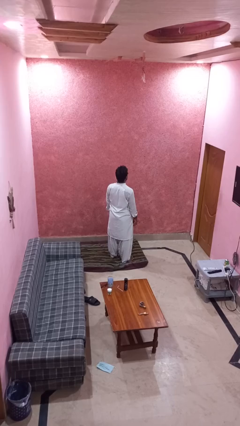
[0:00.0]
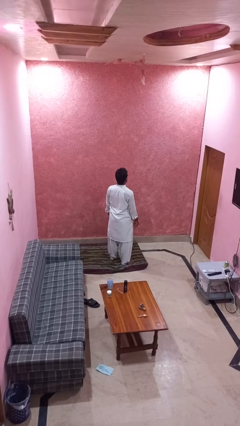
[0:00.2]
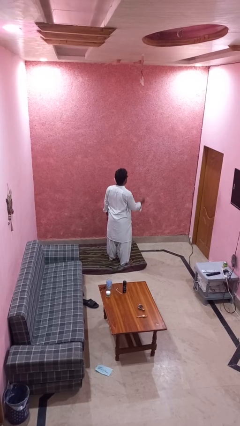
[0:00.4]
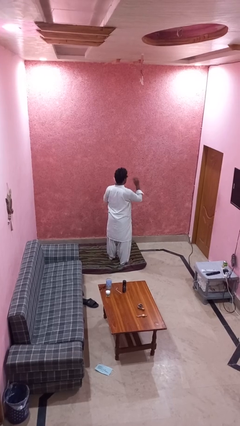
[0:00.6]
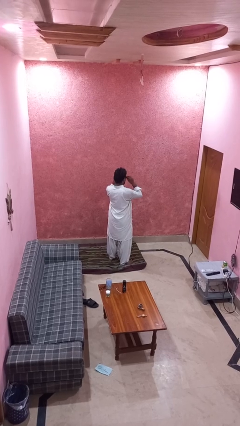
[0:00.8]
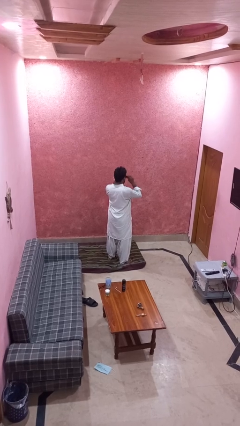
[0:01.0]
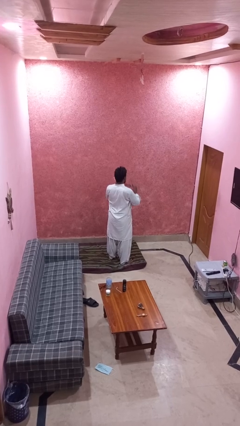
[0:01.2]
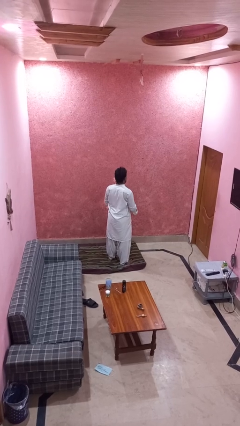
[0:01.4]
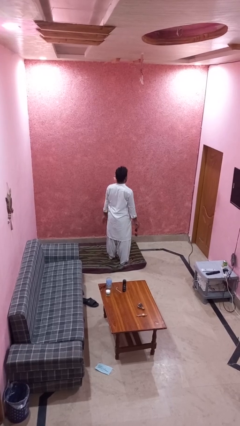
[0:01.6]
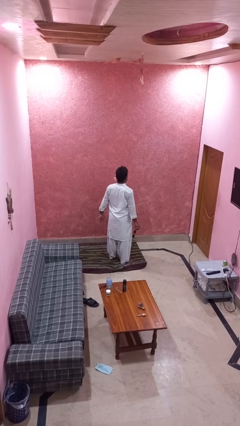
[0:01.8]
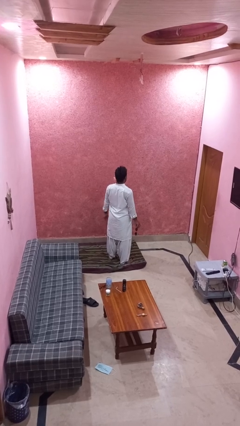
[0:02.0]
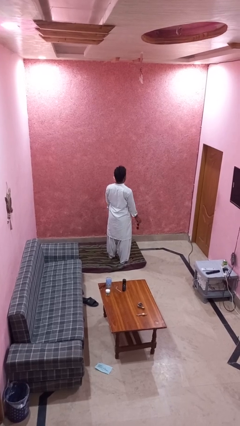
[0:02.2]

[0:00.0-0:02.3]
person takes off sunglasses

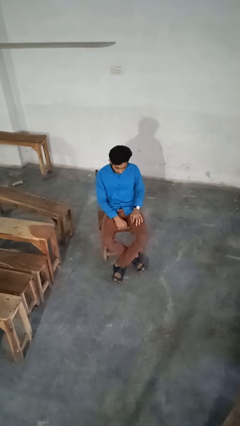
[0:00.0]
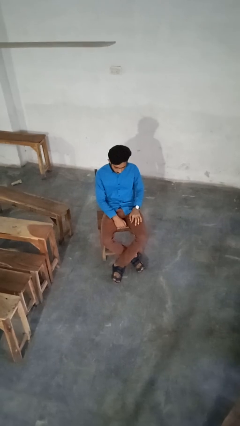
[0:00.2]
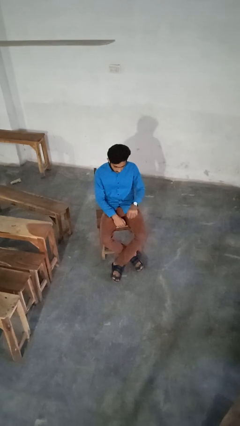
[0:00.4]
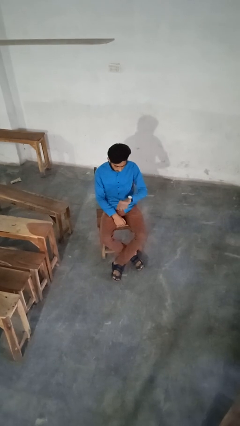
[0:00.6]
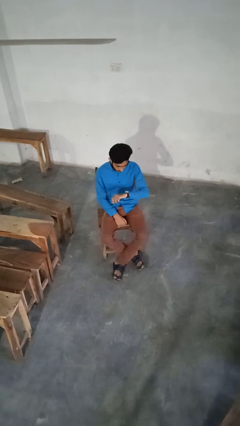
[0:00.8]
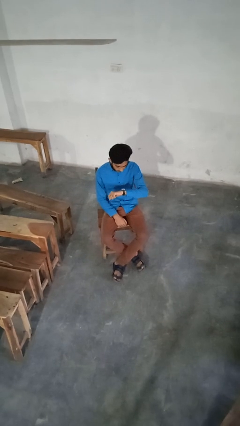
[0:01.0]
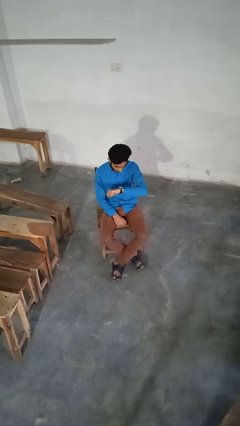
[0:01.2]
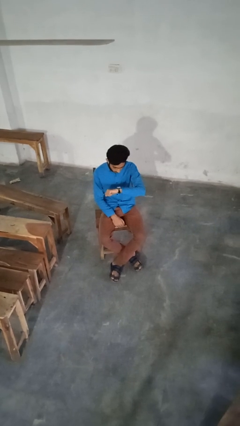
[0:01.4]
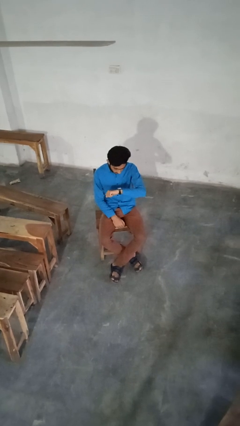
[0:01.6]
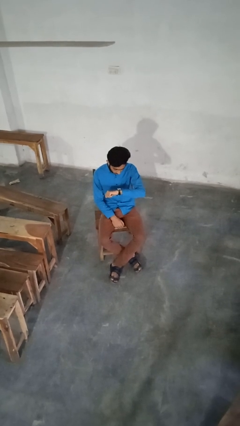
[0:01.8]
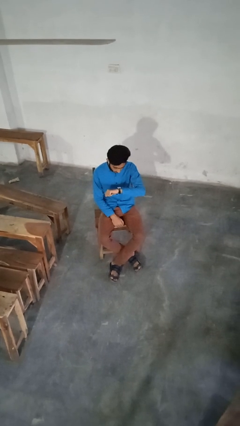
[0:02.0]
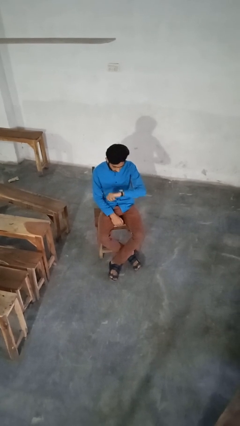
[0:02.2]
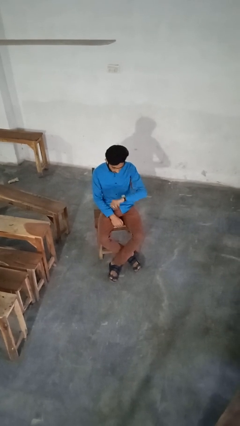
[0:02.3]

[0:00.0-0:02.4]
person looks at wristwatch

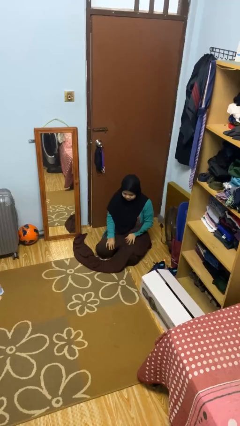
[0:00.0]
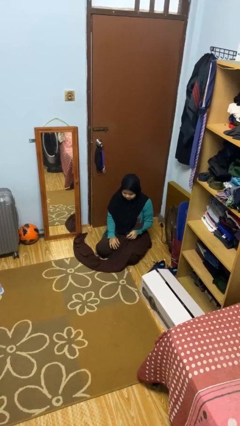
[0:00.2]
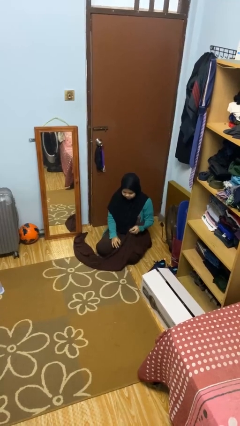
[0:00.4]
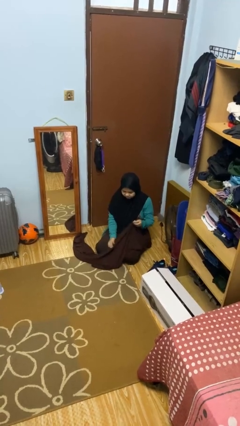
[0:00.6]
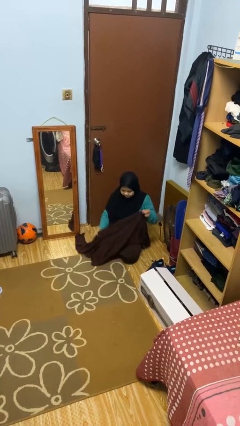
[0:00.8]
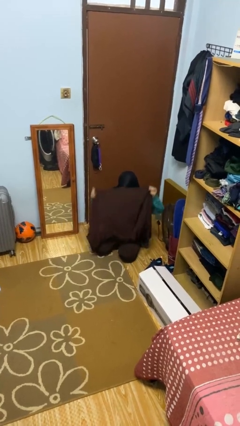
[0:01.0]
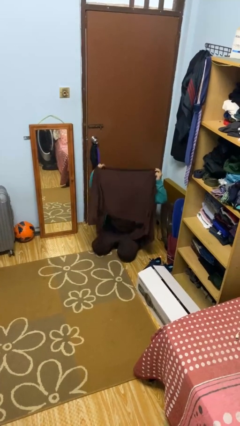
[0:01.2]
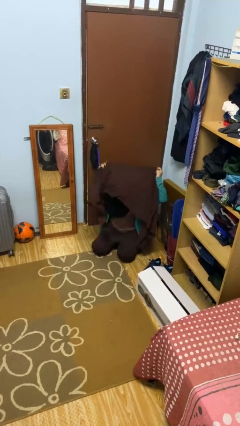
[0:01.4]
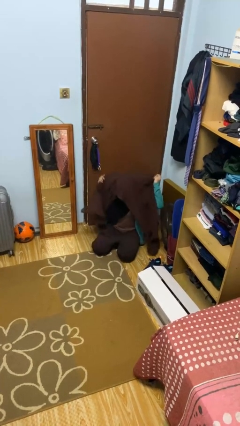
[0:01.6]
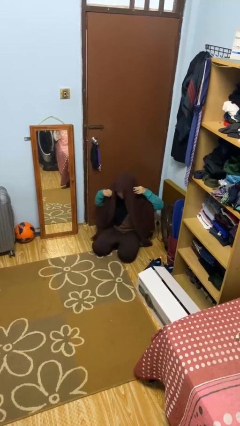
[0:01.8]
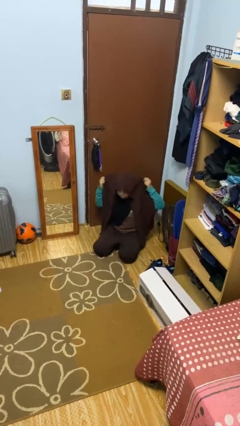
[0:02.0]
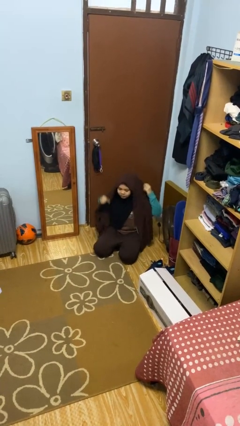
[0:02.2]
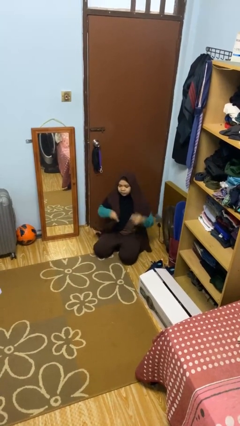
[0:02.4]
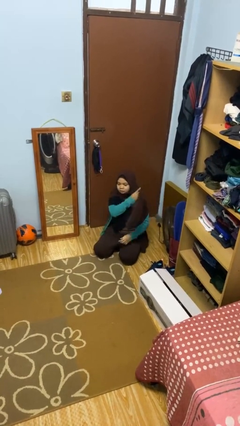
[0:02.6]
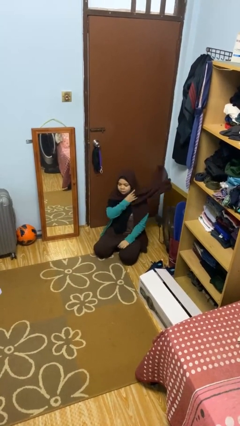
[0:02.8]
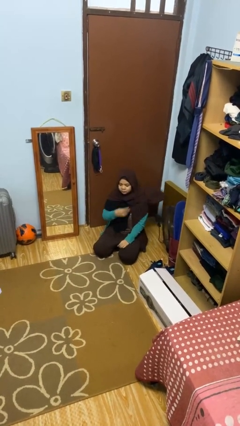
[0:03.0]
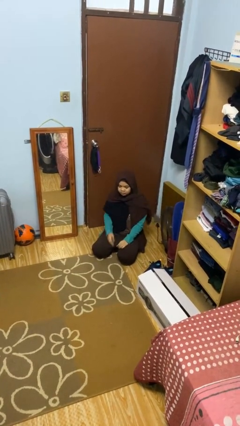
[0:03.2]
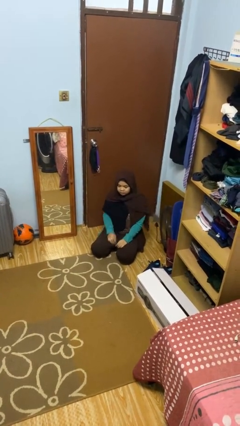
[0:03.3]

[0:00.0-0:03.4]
person puts on scarf

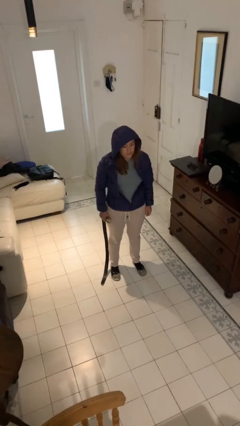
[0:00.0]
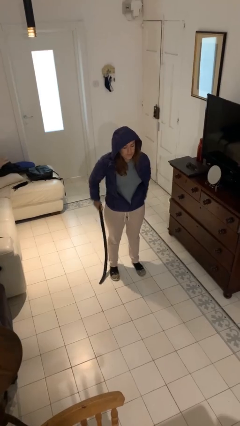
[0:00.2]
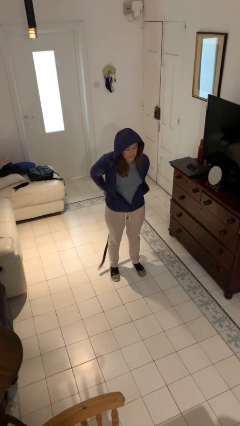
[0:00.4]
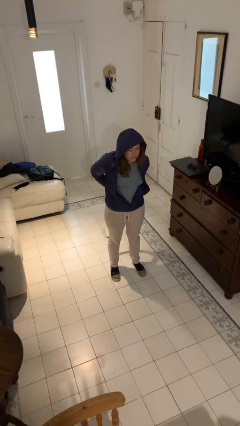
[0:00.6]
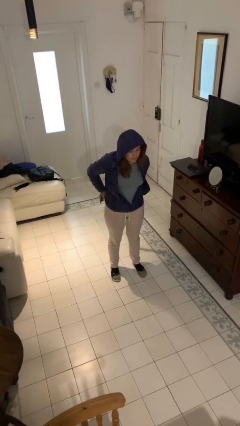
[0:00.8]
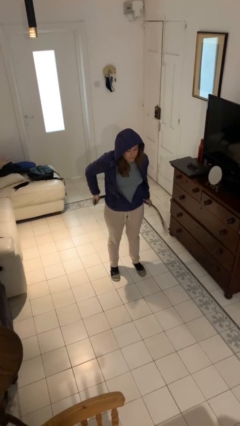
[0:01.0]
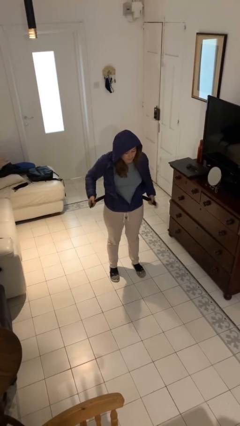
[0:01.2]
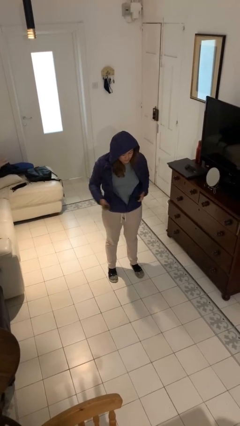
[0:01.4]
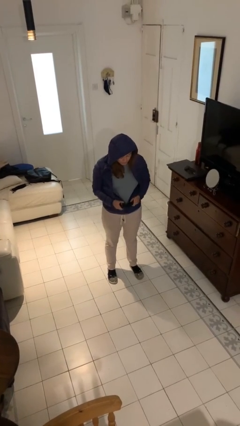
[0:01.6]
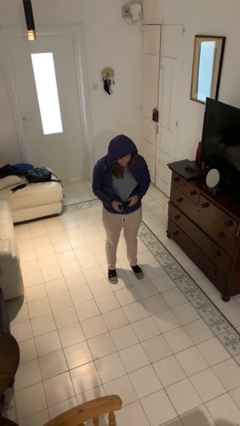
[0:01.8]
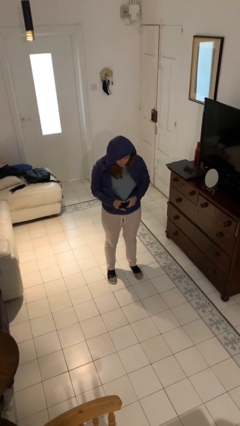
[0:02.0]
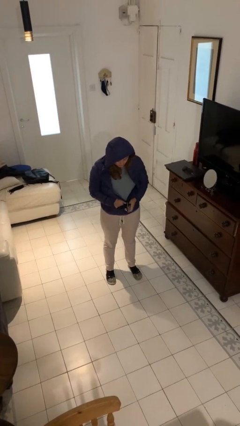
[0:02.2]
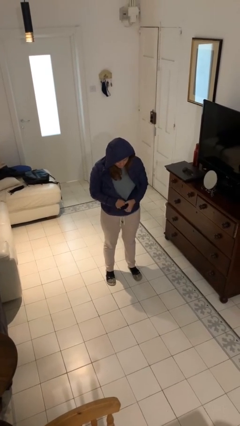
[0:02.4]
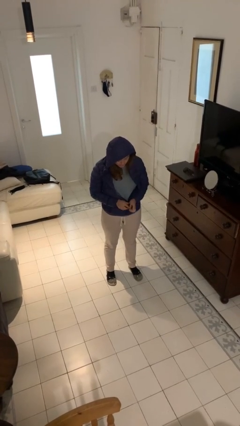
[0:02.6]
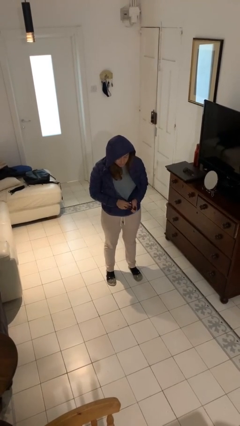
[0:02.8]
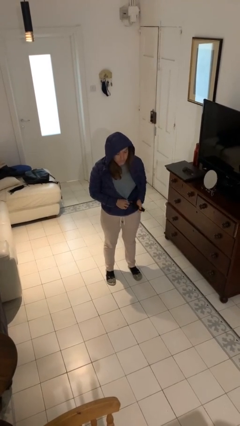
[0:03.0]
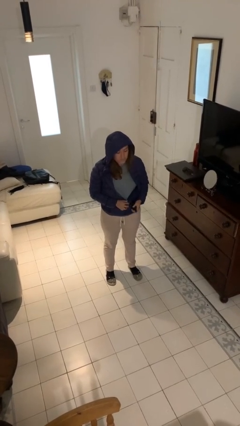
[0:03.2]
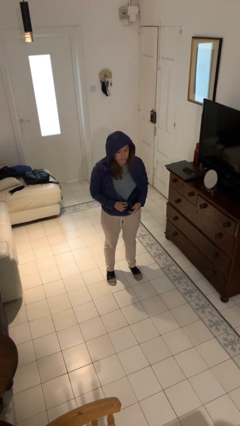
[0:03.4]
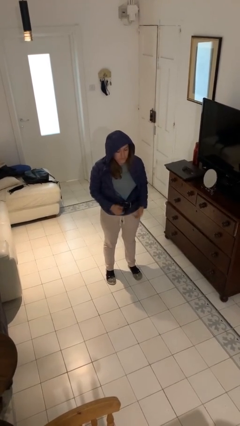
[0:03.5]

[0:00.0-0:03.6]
person puts on belt

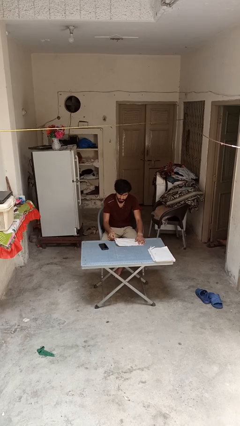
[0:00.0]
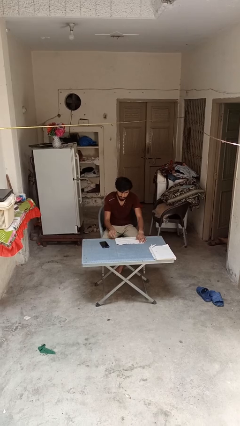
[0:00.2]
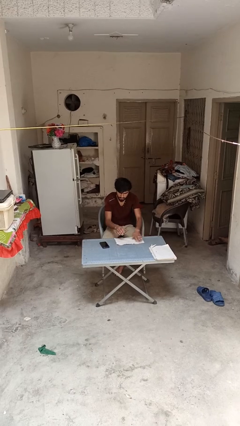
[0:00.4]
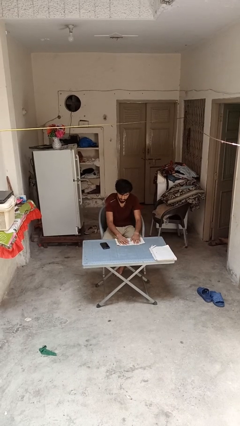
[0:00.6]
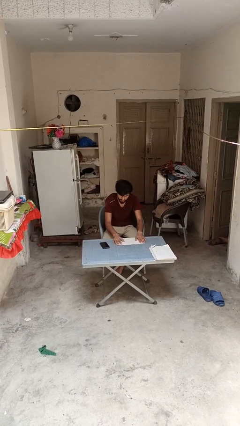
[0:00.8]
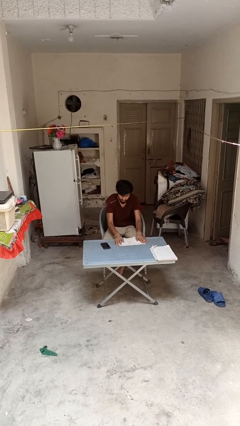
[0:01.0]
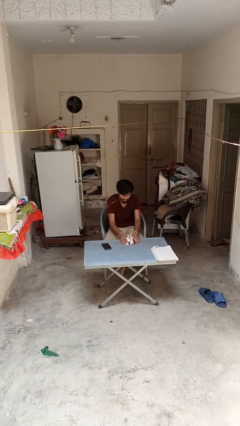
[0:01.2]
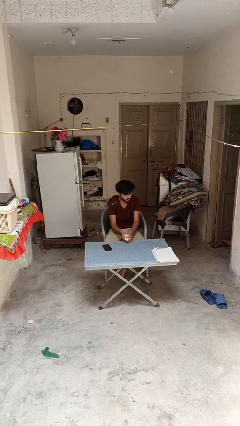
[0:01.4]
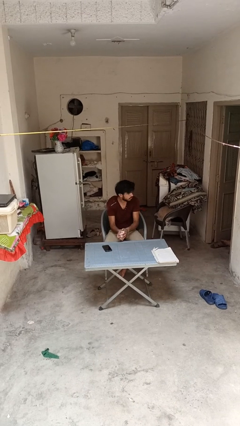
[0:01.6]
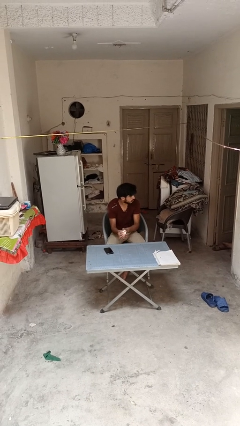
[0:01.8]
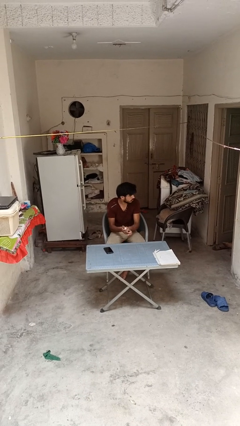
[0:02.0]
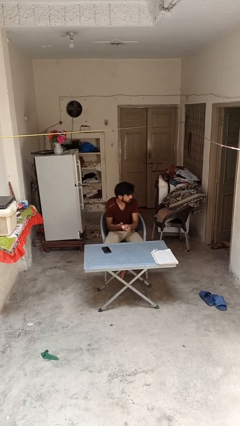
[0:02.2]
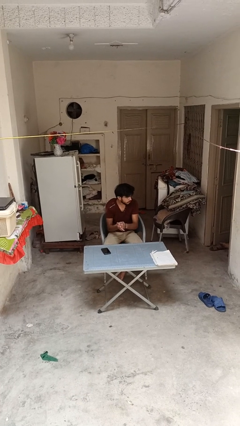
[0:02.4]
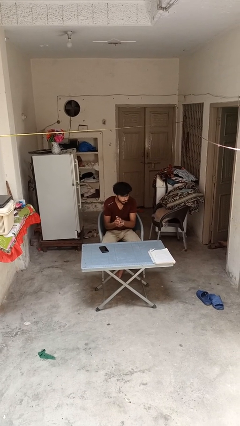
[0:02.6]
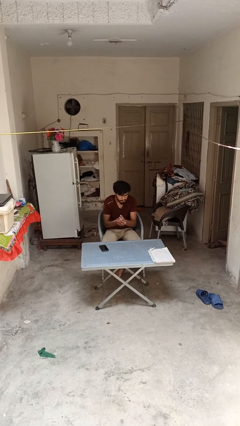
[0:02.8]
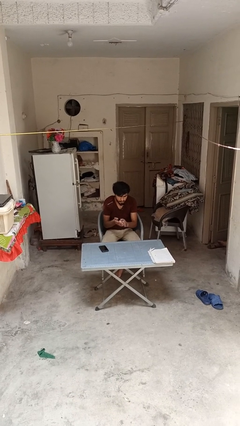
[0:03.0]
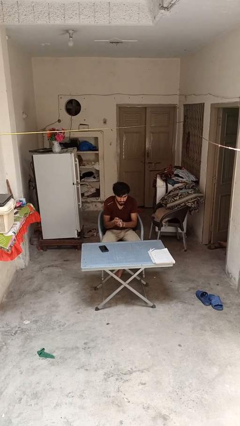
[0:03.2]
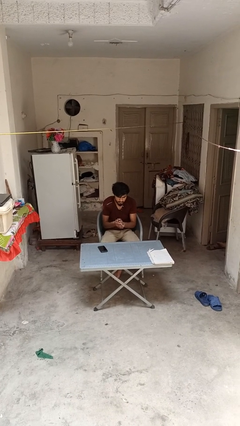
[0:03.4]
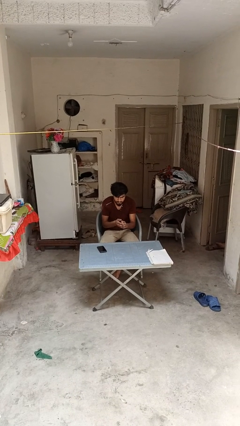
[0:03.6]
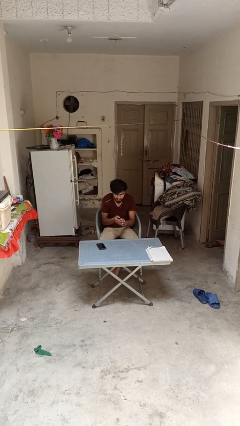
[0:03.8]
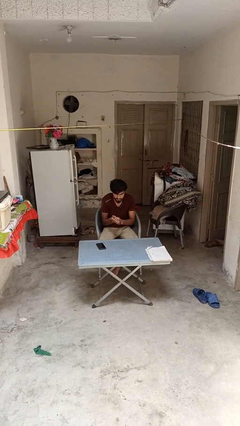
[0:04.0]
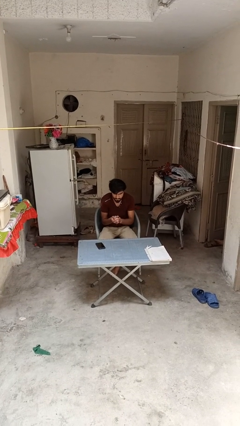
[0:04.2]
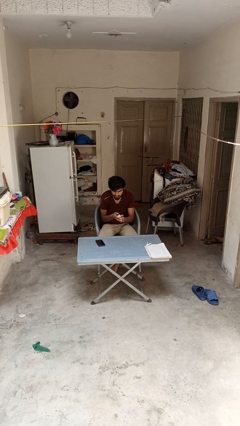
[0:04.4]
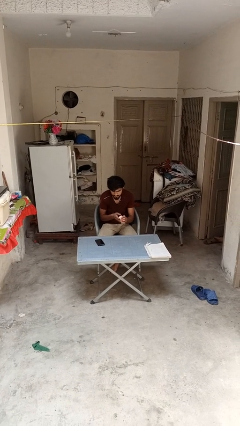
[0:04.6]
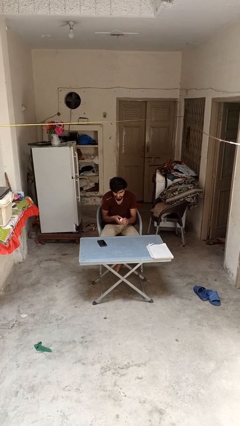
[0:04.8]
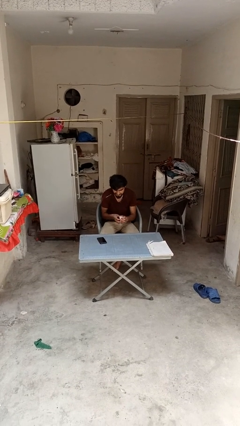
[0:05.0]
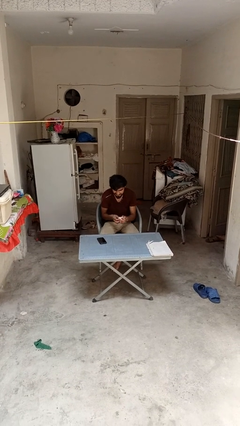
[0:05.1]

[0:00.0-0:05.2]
person crumples paper

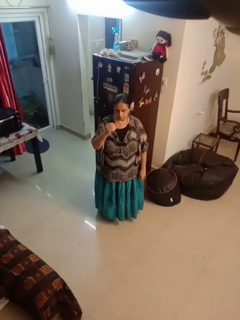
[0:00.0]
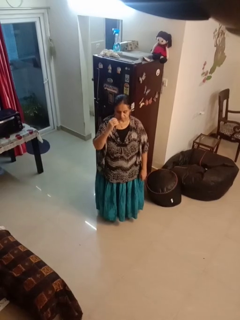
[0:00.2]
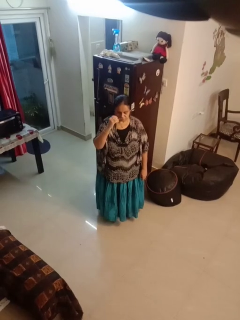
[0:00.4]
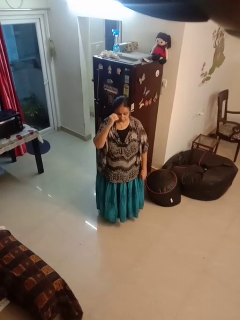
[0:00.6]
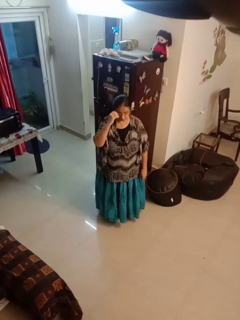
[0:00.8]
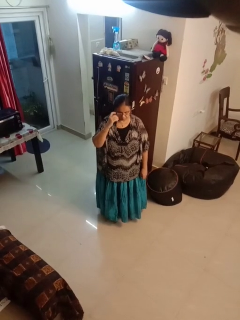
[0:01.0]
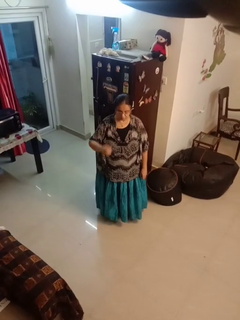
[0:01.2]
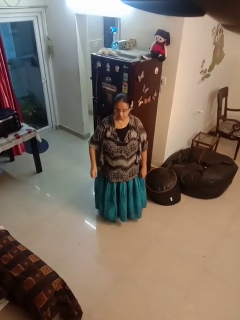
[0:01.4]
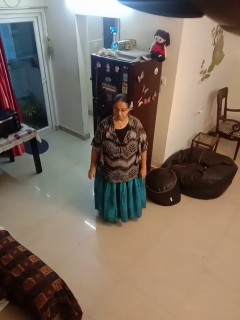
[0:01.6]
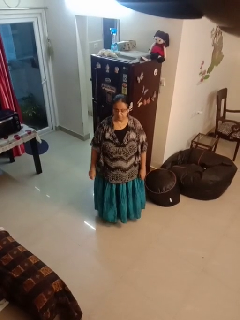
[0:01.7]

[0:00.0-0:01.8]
person puts on glasses
